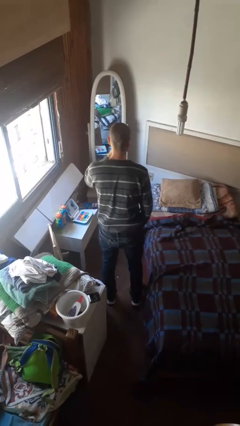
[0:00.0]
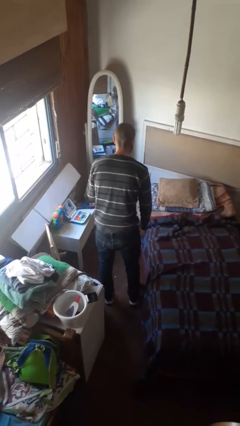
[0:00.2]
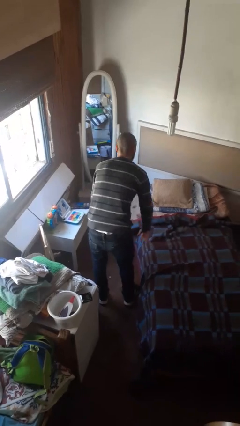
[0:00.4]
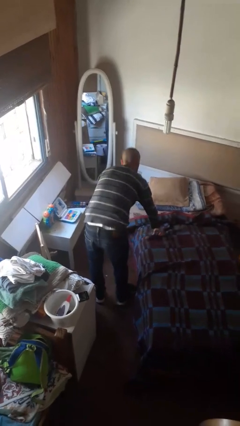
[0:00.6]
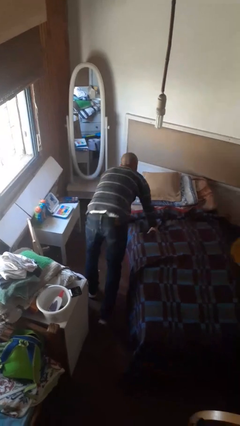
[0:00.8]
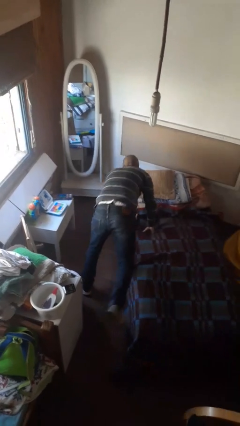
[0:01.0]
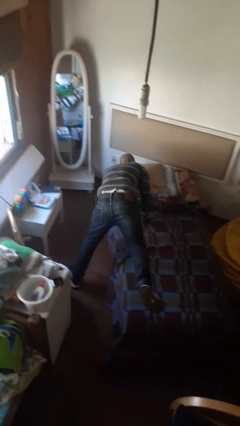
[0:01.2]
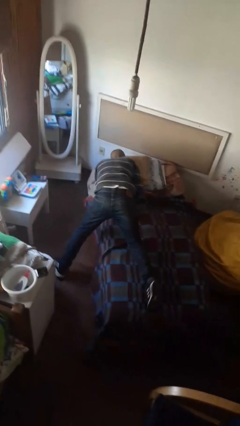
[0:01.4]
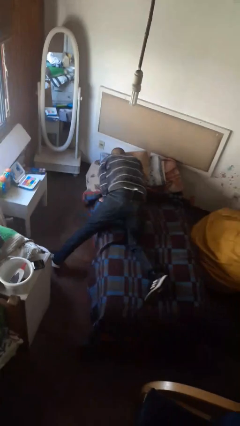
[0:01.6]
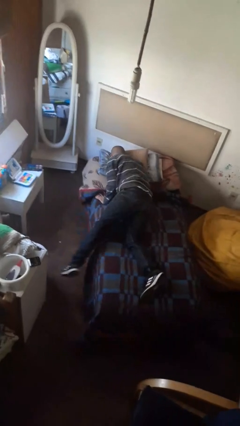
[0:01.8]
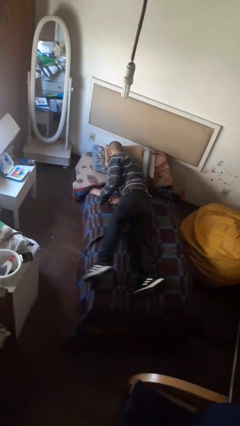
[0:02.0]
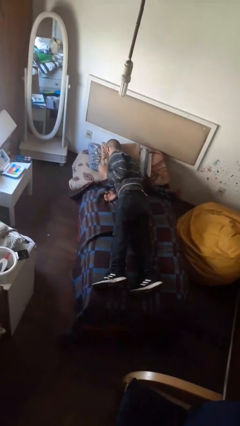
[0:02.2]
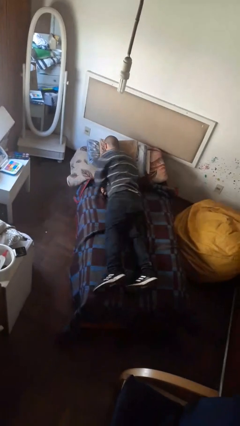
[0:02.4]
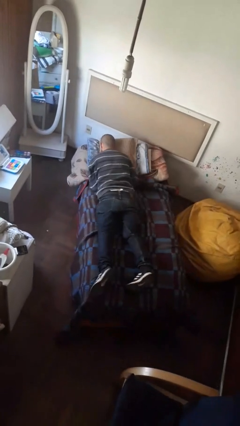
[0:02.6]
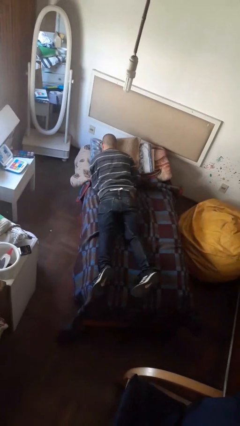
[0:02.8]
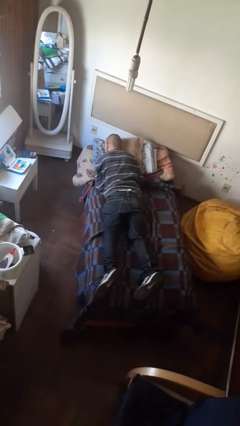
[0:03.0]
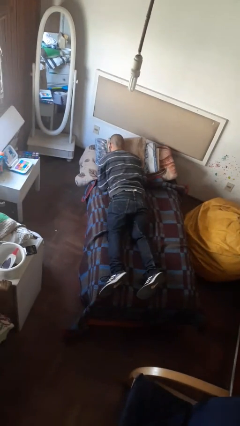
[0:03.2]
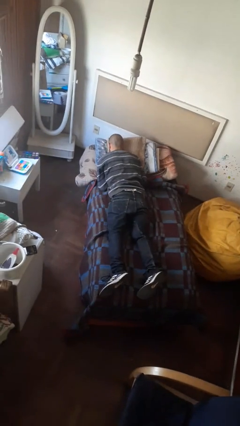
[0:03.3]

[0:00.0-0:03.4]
person lies down on bed

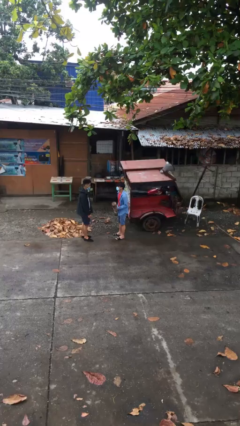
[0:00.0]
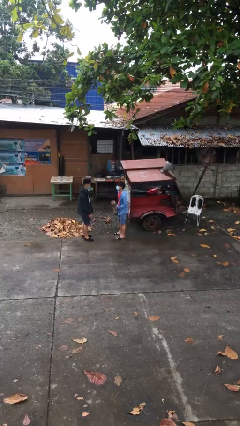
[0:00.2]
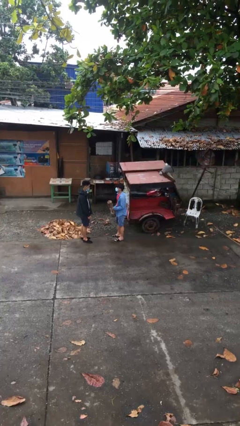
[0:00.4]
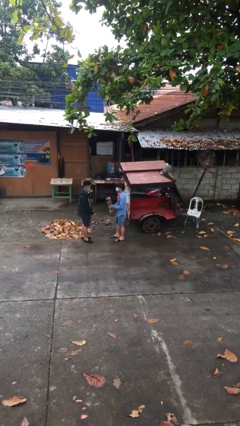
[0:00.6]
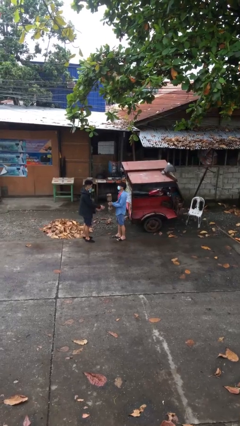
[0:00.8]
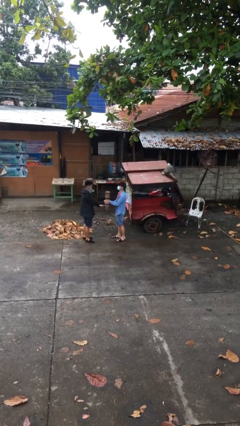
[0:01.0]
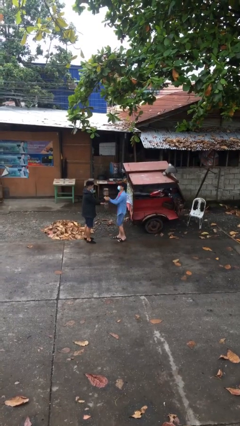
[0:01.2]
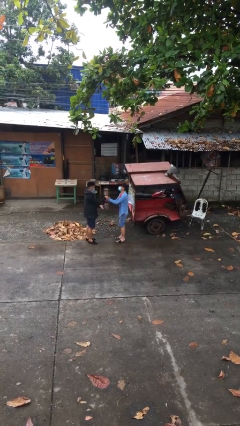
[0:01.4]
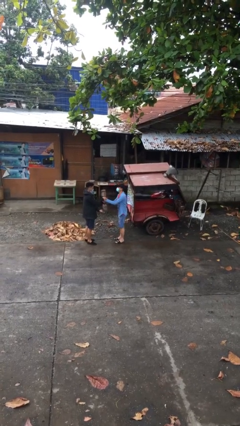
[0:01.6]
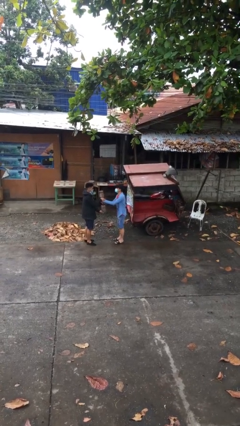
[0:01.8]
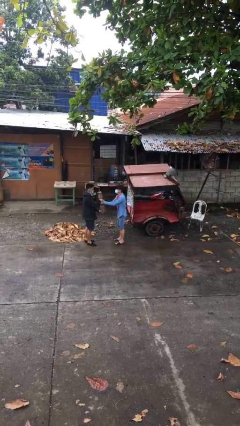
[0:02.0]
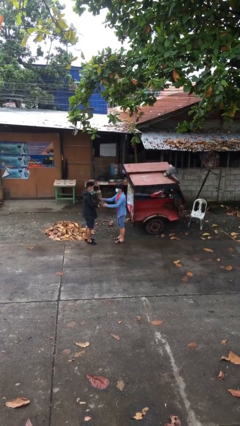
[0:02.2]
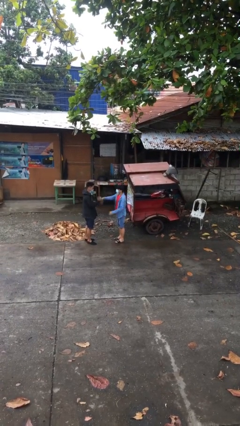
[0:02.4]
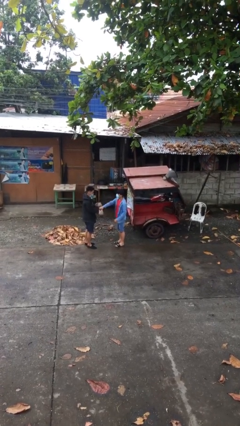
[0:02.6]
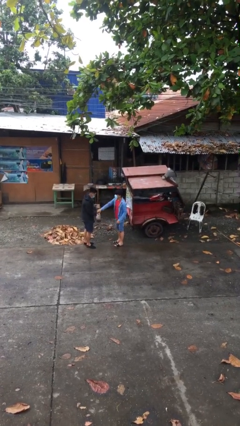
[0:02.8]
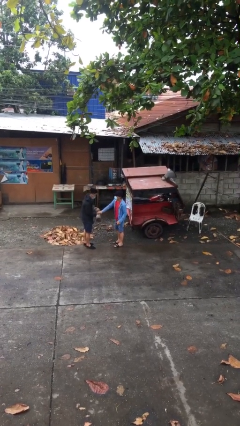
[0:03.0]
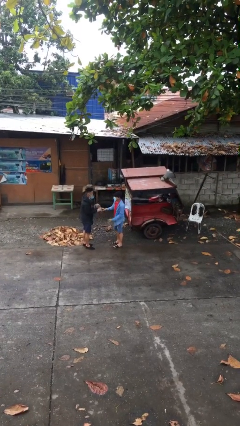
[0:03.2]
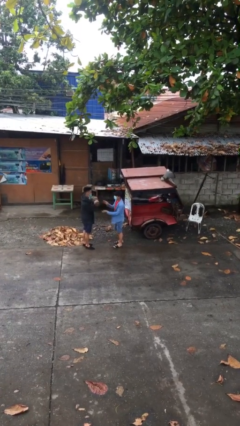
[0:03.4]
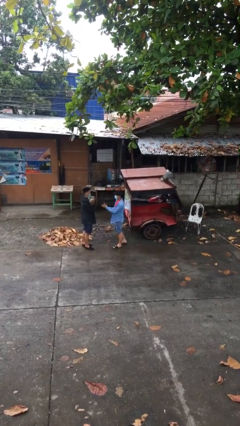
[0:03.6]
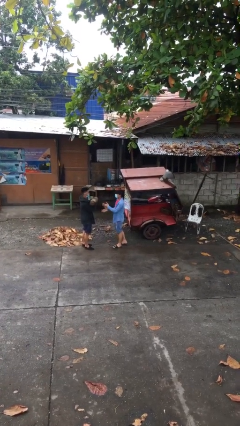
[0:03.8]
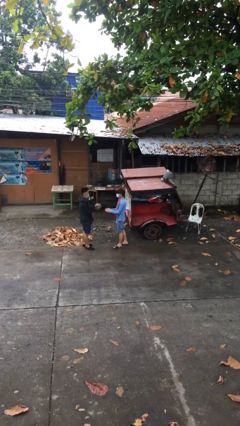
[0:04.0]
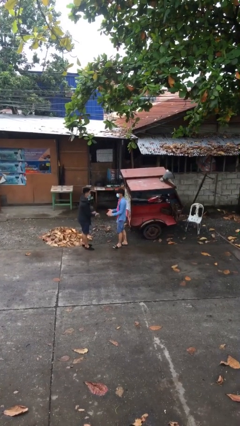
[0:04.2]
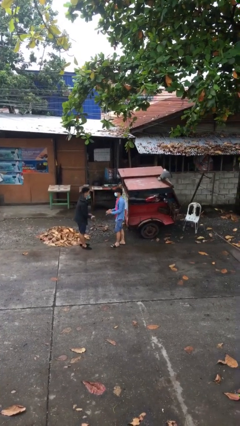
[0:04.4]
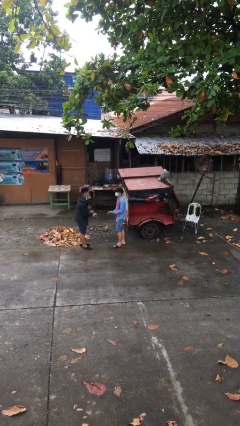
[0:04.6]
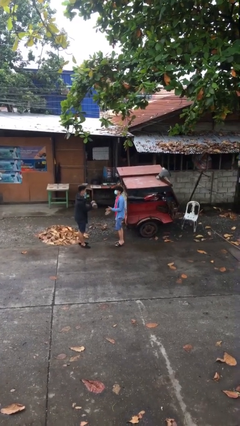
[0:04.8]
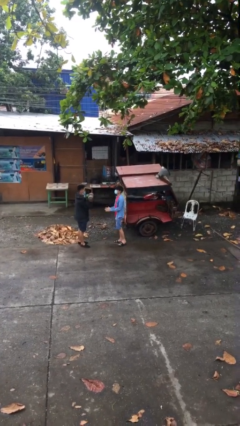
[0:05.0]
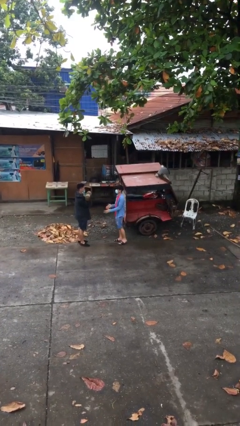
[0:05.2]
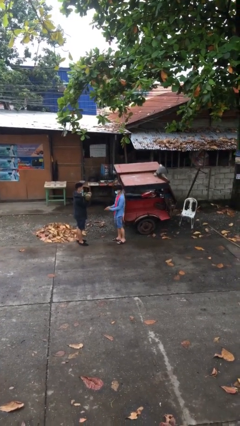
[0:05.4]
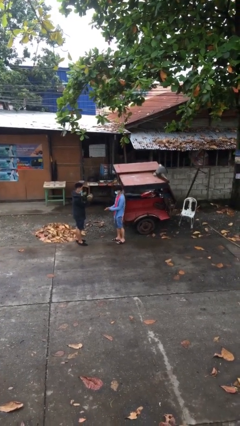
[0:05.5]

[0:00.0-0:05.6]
person transfers object to person

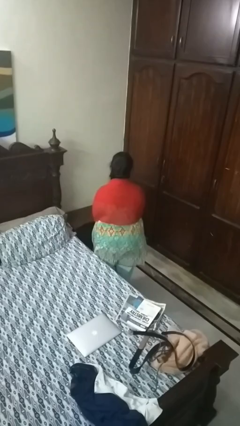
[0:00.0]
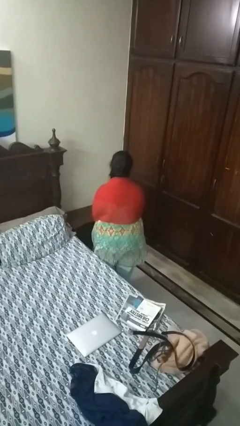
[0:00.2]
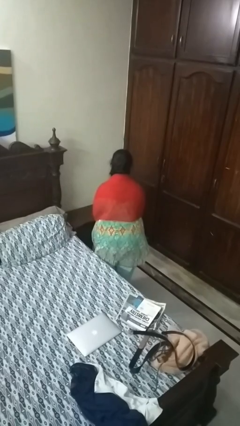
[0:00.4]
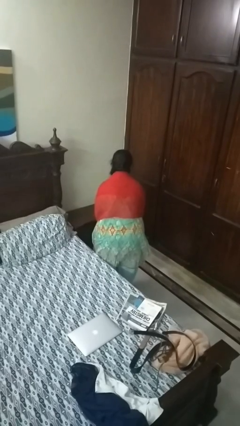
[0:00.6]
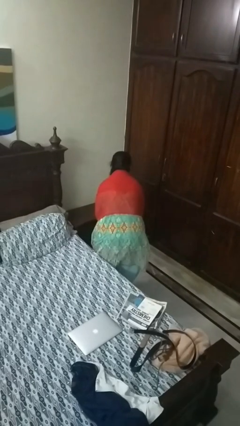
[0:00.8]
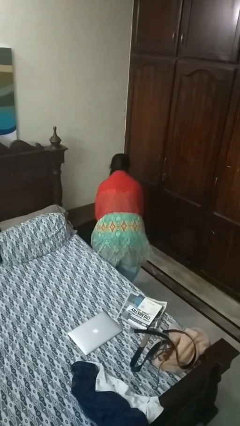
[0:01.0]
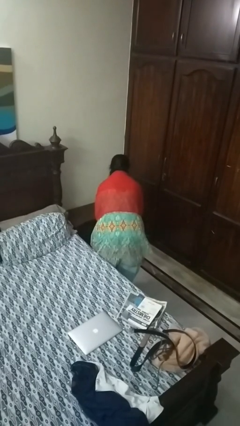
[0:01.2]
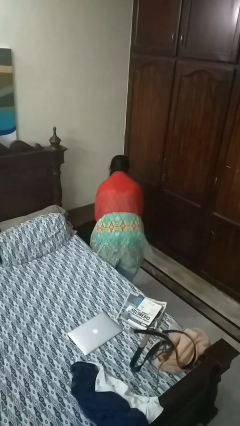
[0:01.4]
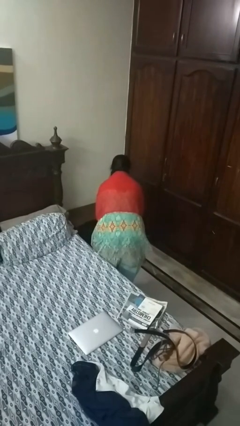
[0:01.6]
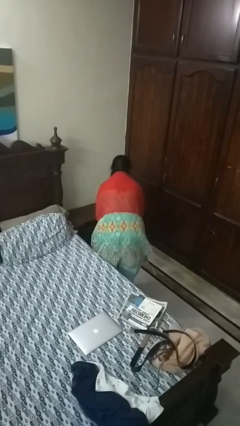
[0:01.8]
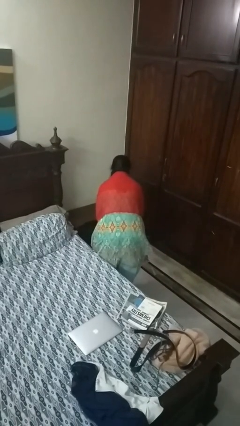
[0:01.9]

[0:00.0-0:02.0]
person bows

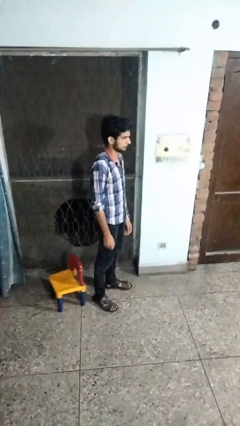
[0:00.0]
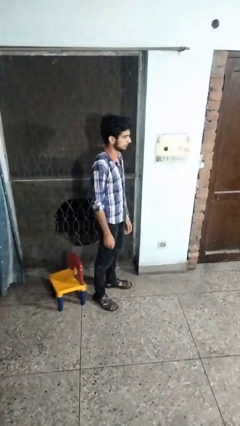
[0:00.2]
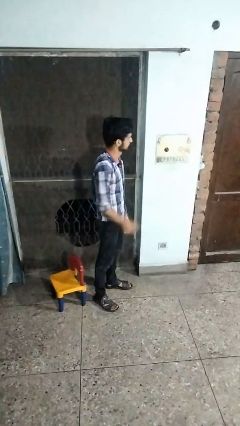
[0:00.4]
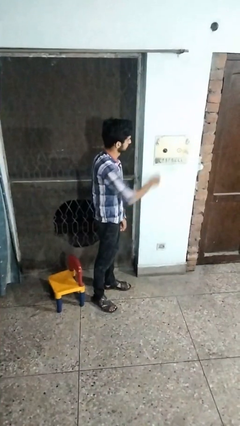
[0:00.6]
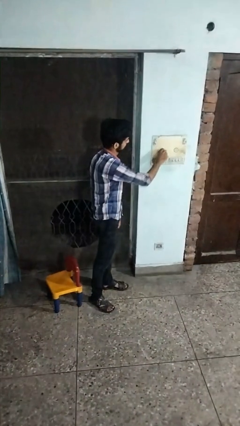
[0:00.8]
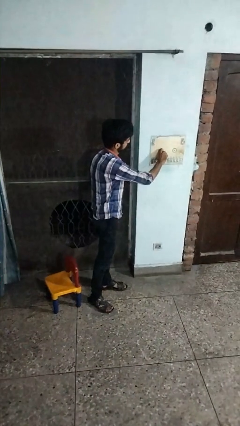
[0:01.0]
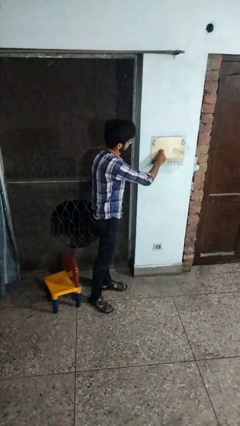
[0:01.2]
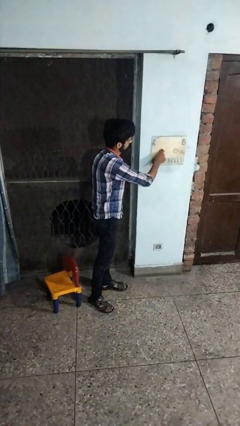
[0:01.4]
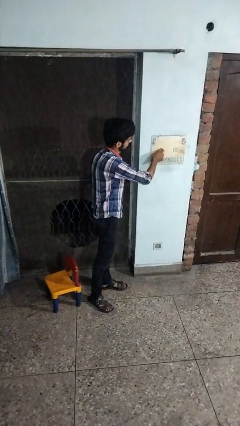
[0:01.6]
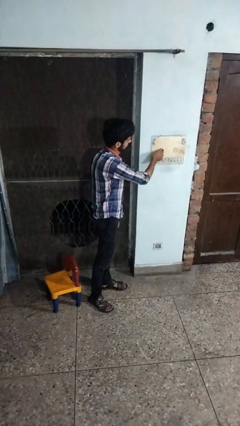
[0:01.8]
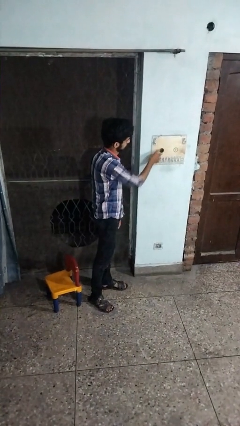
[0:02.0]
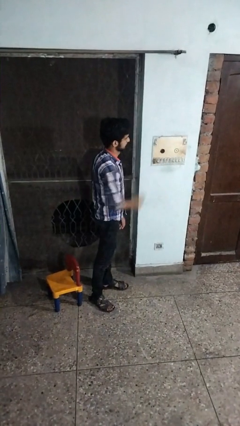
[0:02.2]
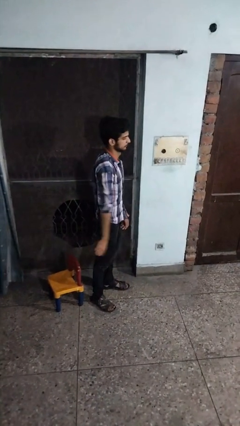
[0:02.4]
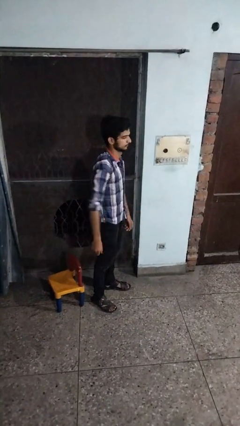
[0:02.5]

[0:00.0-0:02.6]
person adjusts thermostat

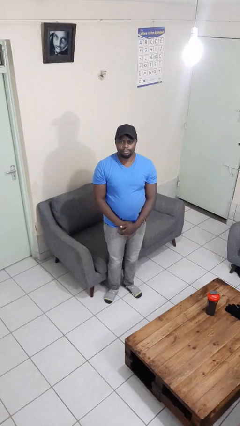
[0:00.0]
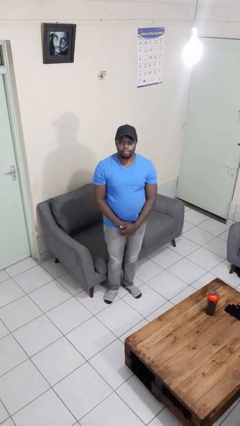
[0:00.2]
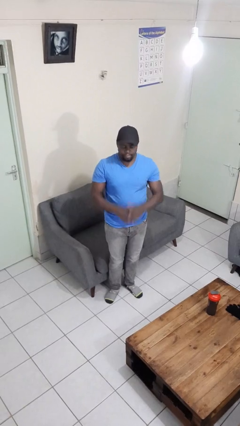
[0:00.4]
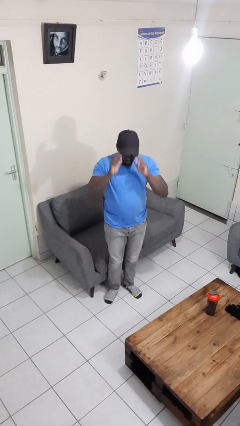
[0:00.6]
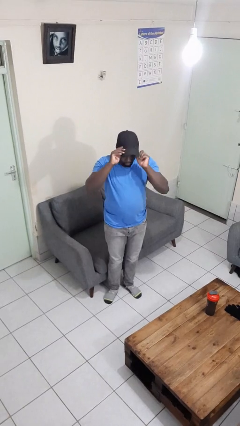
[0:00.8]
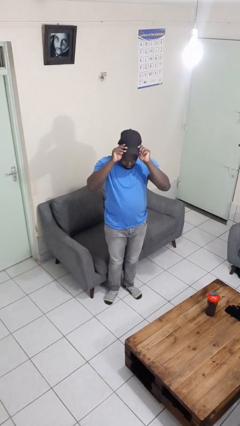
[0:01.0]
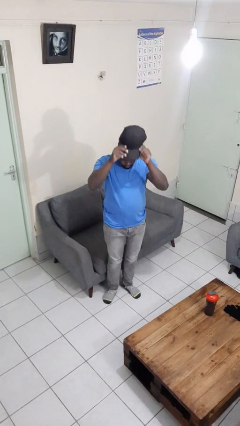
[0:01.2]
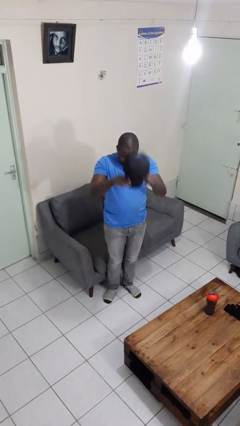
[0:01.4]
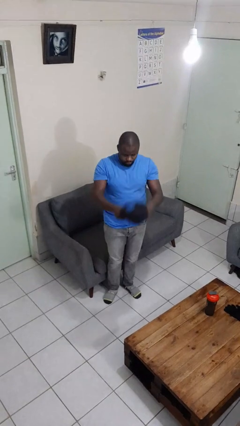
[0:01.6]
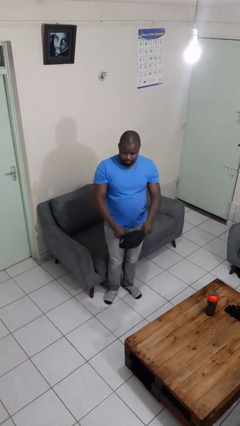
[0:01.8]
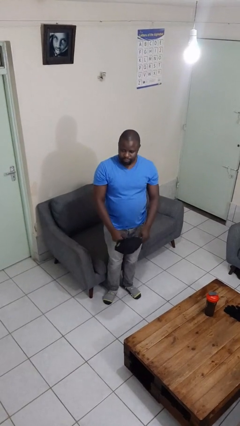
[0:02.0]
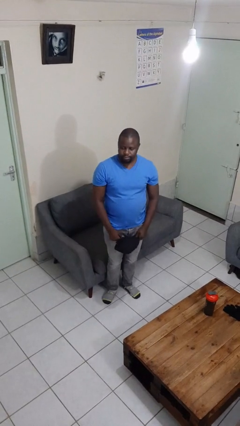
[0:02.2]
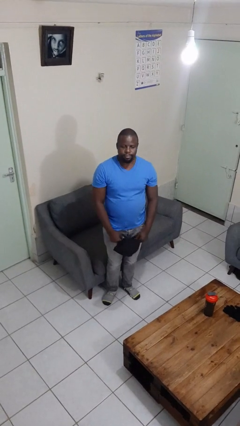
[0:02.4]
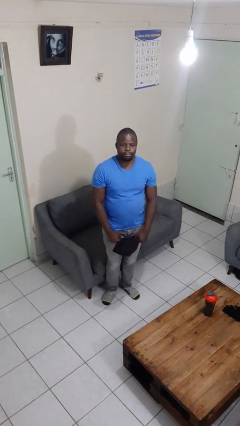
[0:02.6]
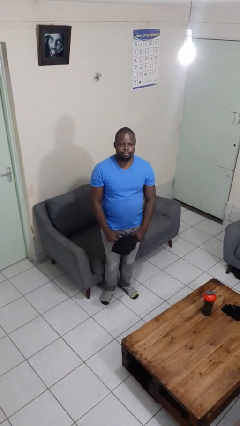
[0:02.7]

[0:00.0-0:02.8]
person takes off hat

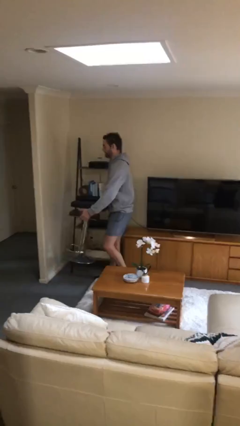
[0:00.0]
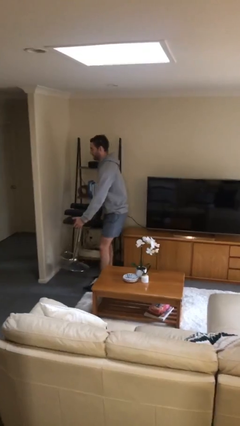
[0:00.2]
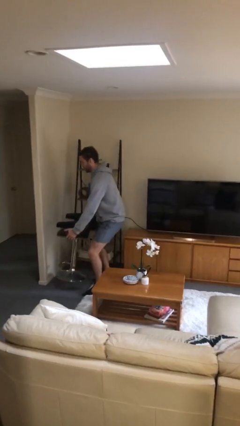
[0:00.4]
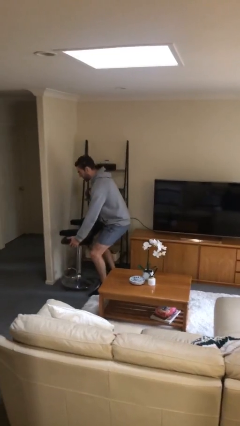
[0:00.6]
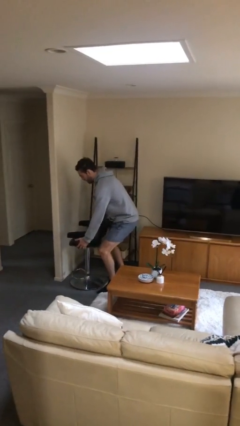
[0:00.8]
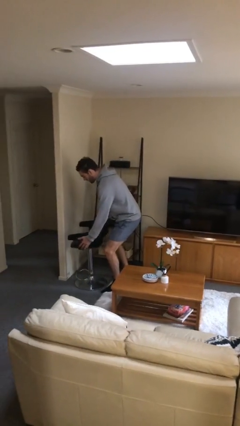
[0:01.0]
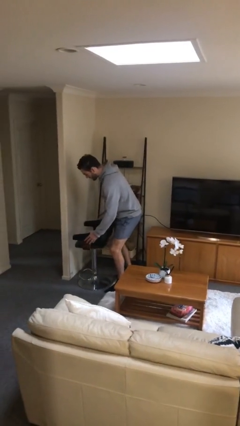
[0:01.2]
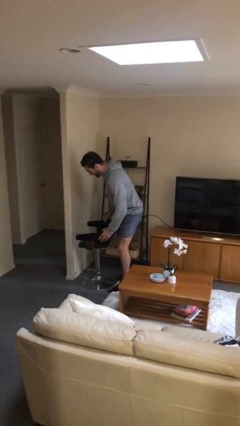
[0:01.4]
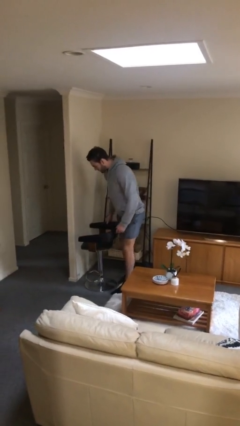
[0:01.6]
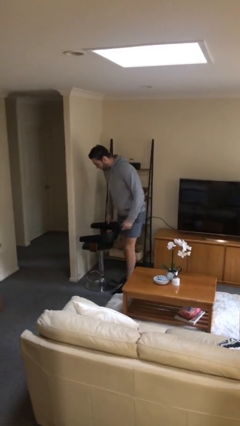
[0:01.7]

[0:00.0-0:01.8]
person puts down object on floor
